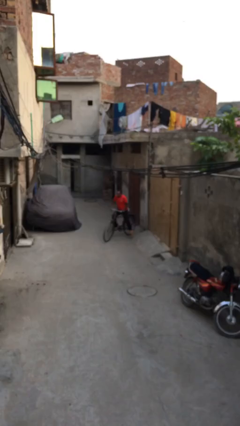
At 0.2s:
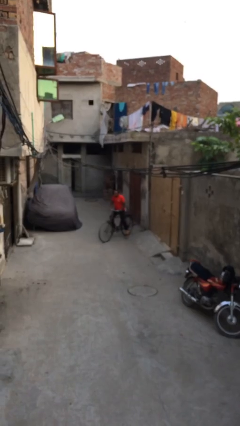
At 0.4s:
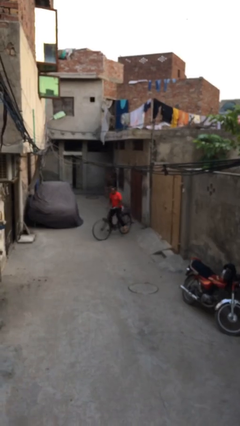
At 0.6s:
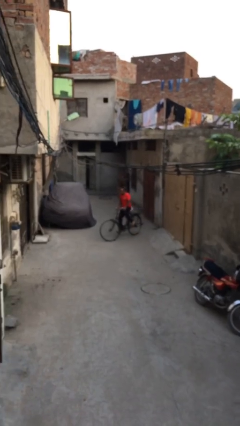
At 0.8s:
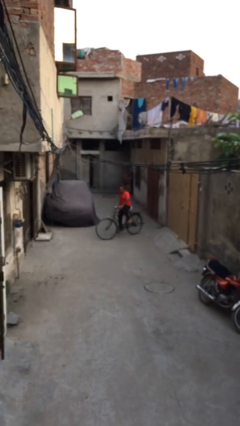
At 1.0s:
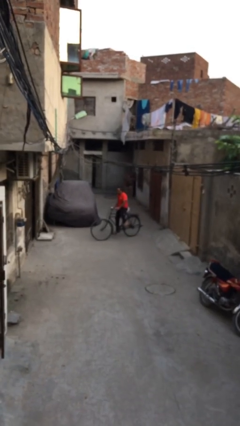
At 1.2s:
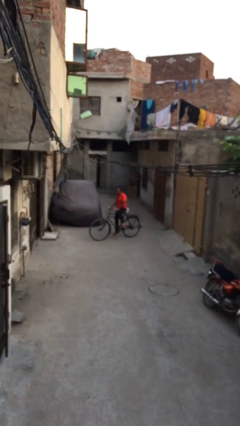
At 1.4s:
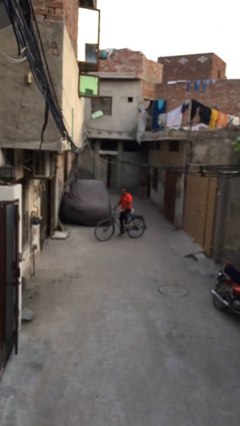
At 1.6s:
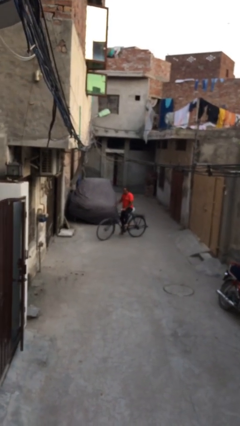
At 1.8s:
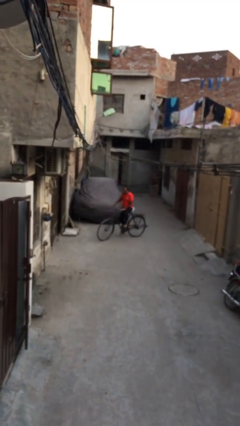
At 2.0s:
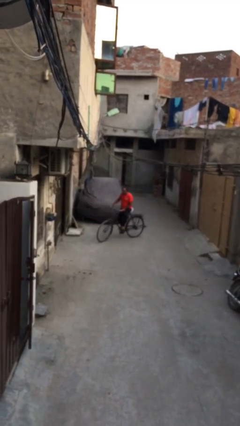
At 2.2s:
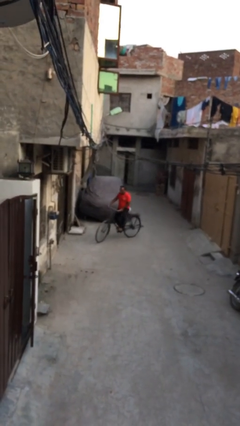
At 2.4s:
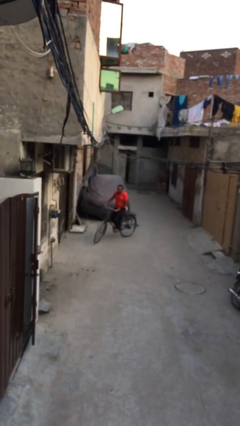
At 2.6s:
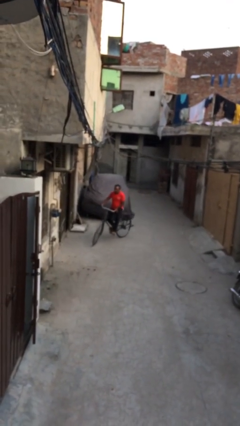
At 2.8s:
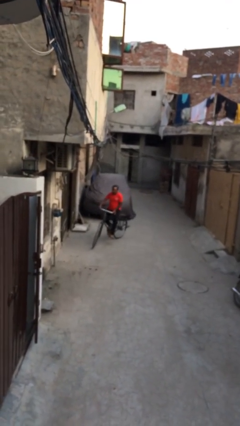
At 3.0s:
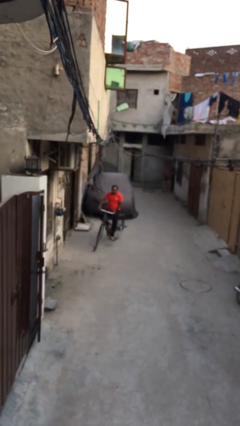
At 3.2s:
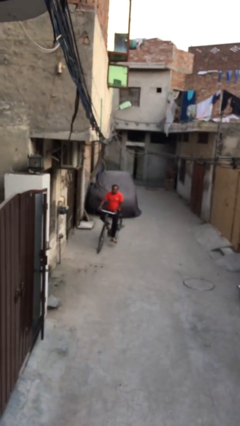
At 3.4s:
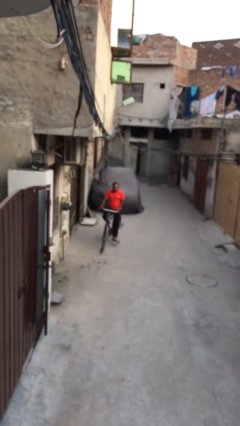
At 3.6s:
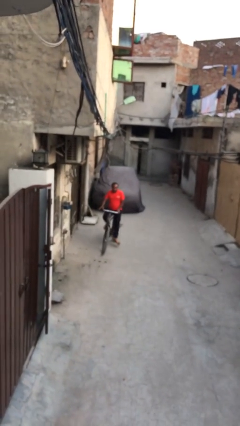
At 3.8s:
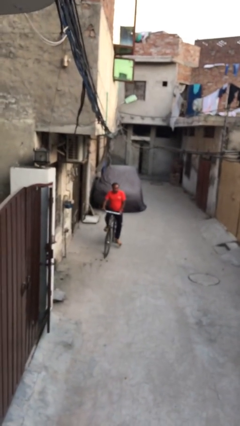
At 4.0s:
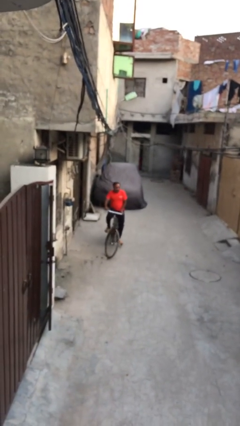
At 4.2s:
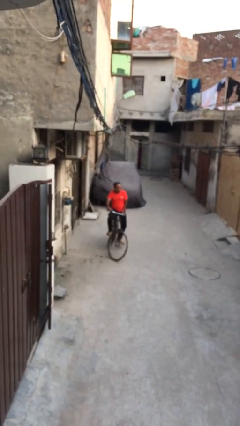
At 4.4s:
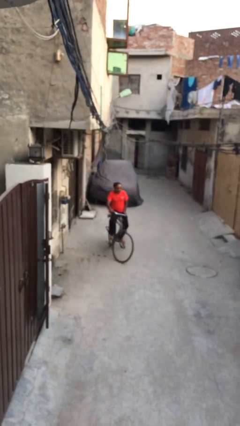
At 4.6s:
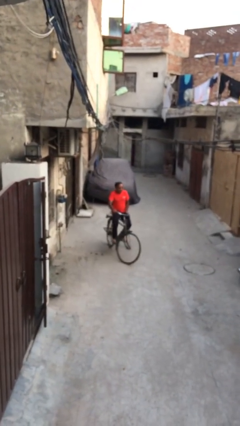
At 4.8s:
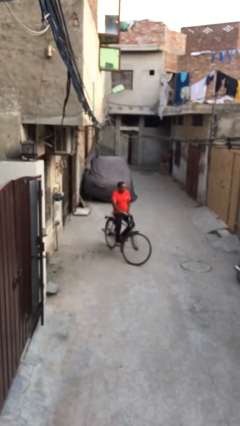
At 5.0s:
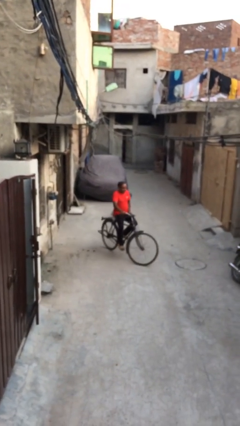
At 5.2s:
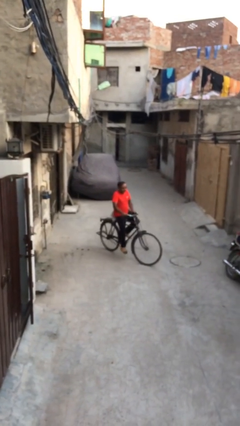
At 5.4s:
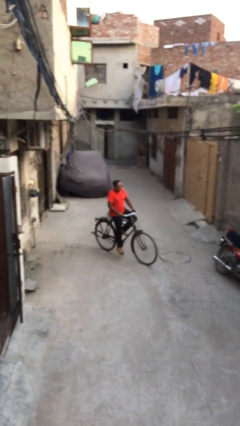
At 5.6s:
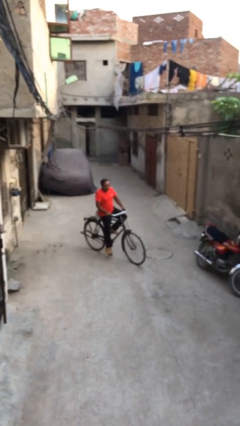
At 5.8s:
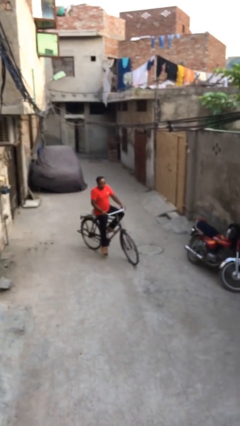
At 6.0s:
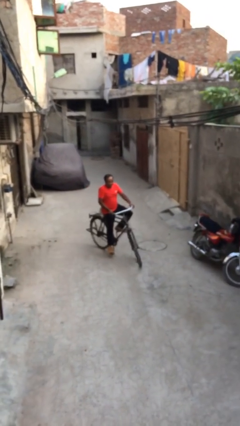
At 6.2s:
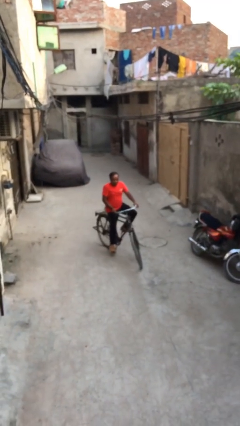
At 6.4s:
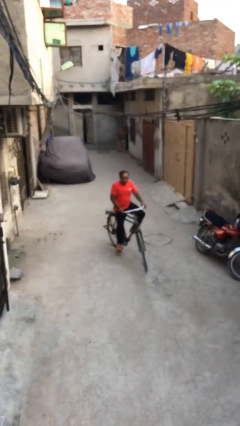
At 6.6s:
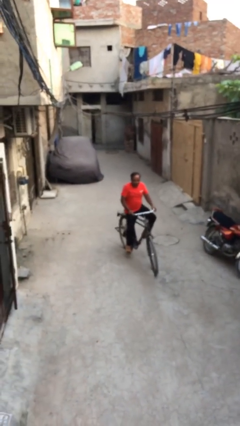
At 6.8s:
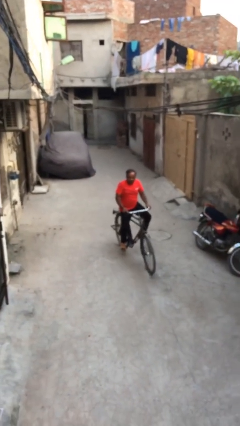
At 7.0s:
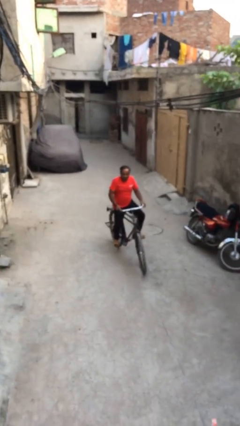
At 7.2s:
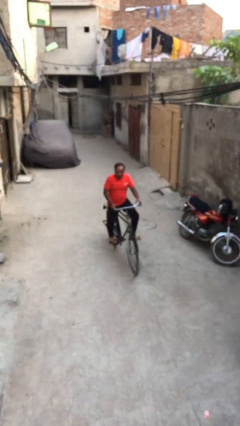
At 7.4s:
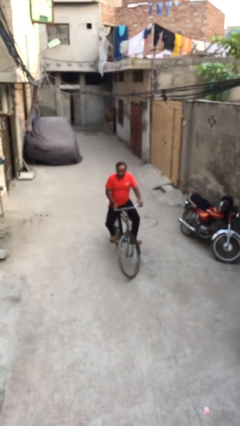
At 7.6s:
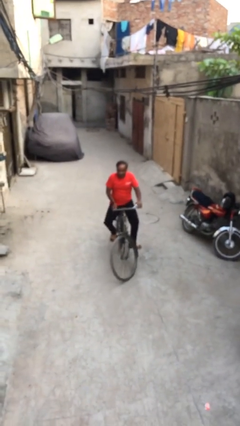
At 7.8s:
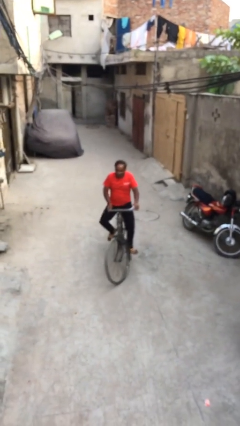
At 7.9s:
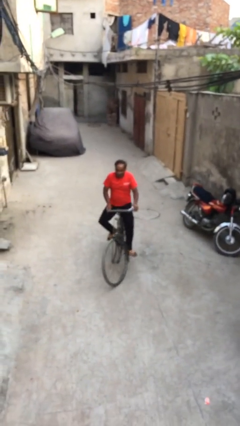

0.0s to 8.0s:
person rides bicycle

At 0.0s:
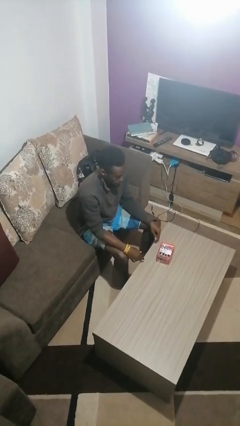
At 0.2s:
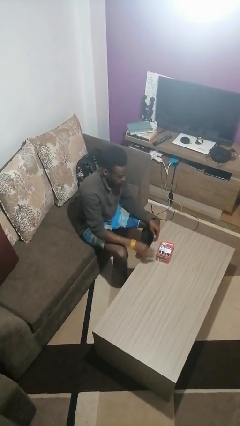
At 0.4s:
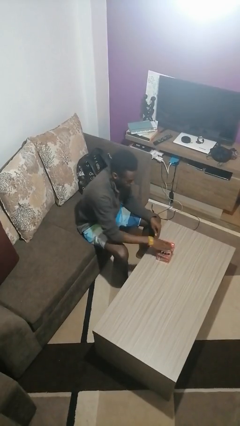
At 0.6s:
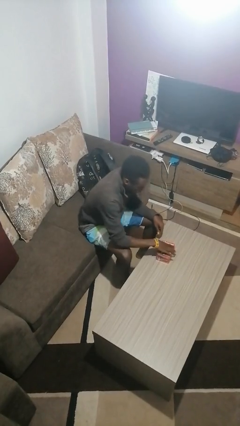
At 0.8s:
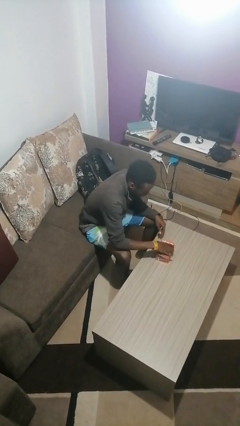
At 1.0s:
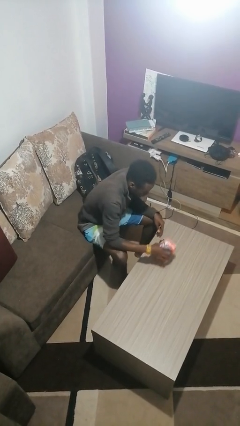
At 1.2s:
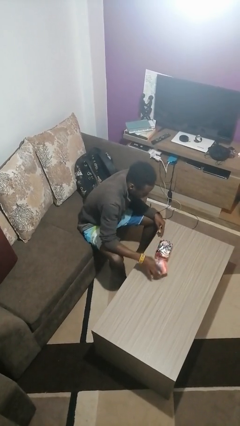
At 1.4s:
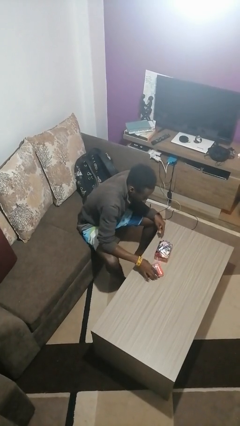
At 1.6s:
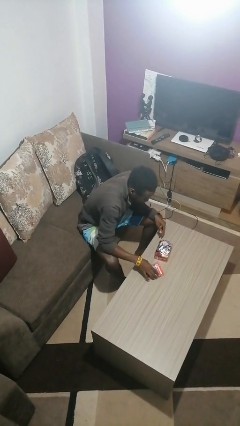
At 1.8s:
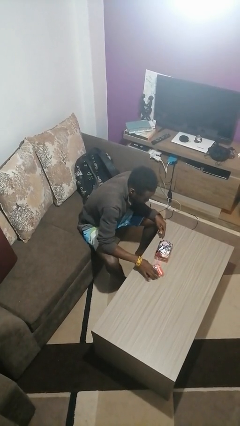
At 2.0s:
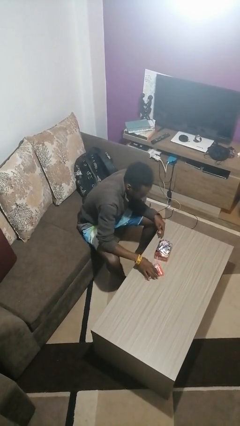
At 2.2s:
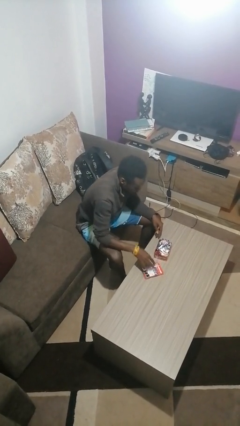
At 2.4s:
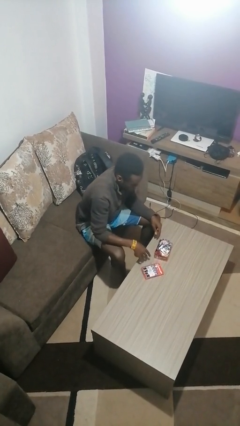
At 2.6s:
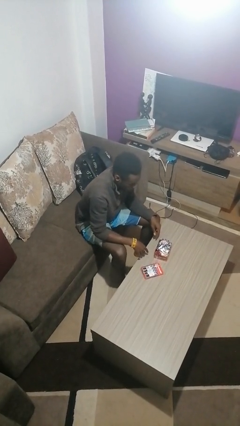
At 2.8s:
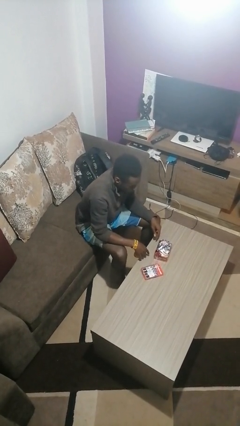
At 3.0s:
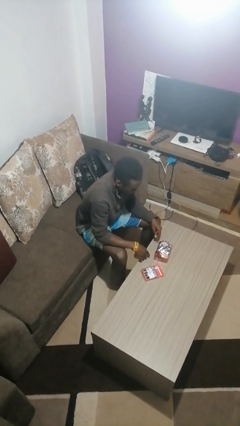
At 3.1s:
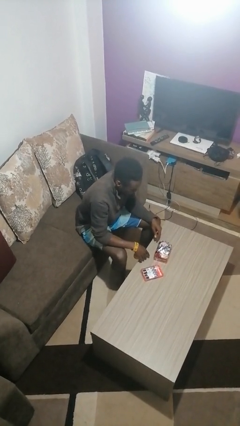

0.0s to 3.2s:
person opens jewelry box

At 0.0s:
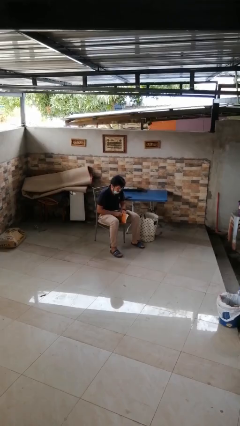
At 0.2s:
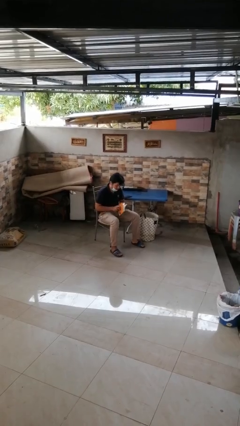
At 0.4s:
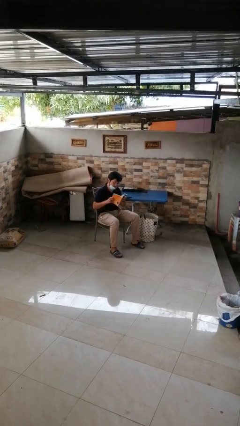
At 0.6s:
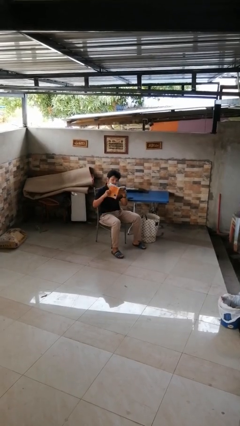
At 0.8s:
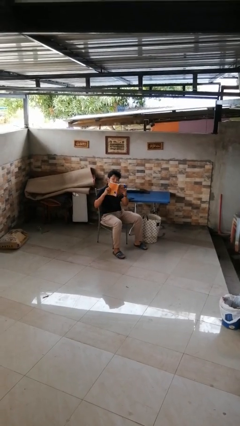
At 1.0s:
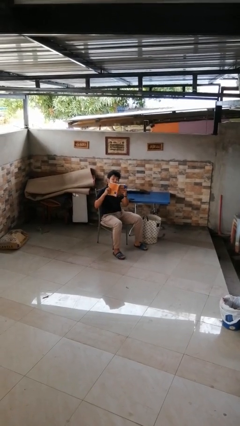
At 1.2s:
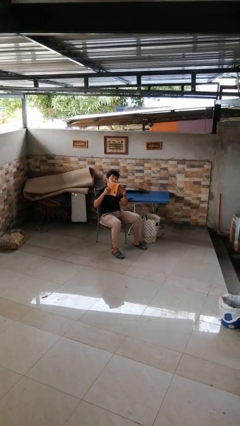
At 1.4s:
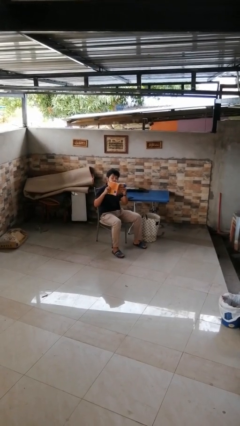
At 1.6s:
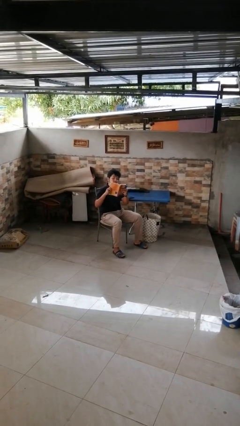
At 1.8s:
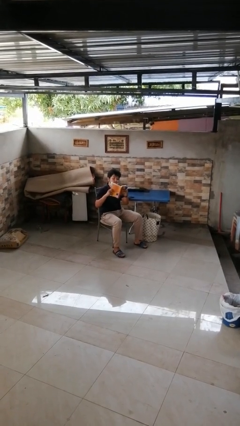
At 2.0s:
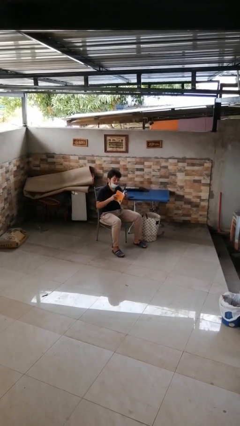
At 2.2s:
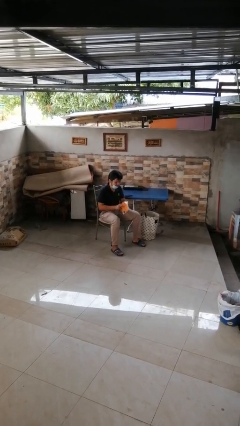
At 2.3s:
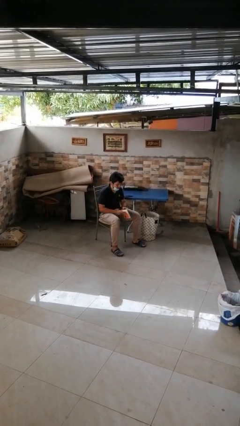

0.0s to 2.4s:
person reads book

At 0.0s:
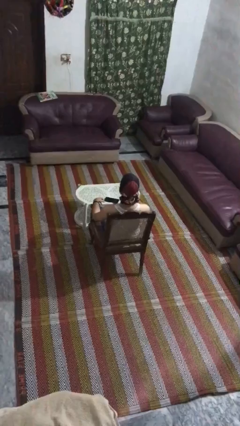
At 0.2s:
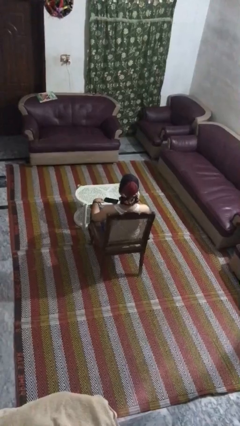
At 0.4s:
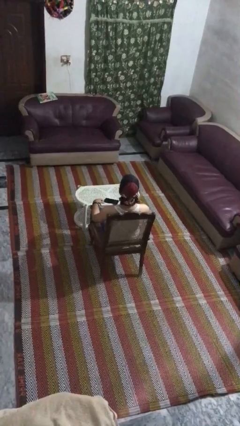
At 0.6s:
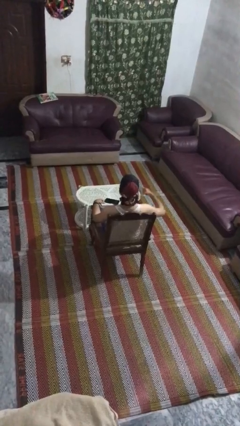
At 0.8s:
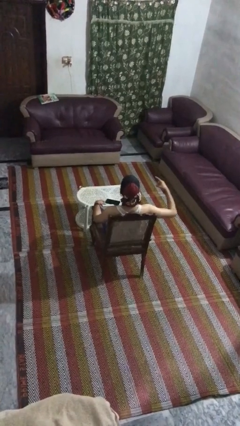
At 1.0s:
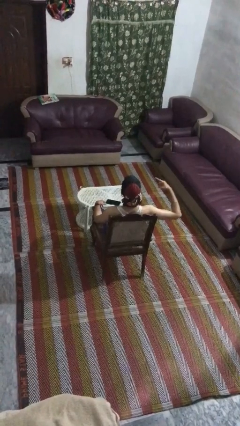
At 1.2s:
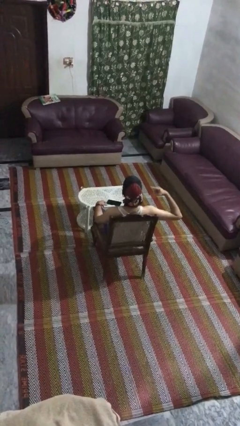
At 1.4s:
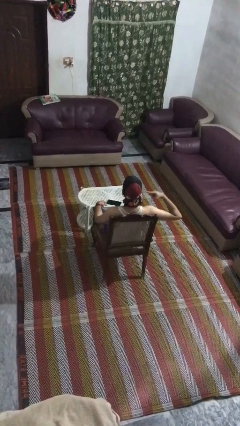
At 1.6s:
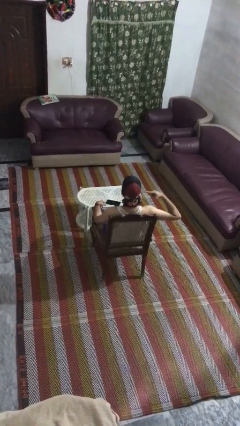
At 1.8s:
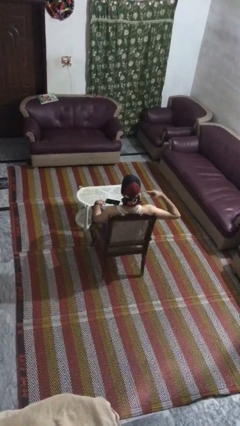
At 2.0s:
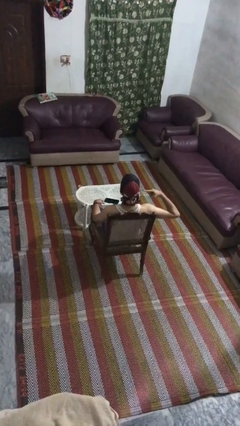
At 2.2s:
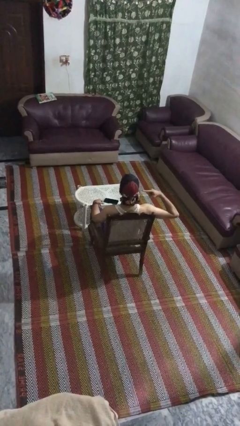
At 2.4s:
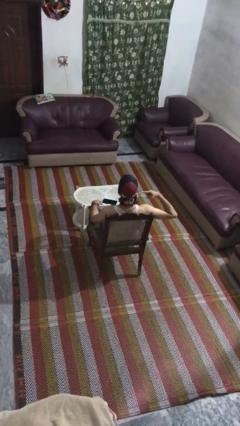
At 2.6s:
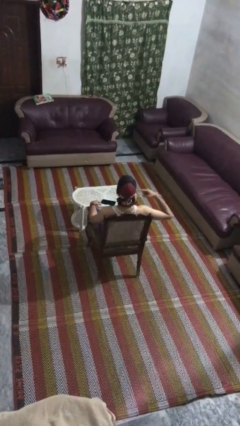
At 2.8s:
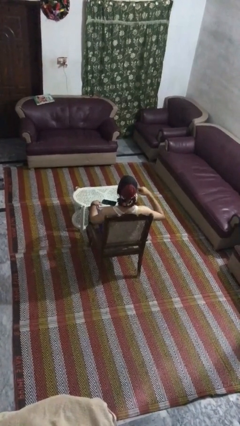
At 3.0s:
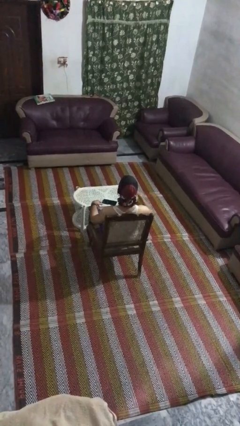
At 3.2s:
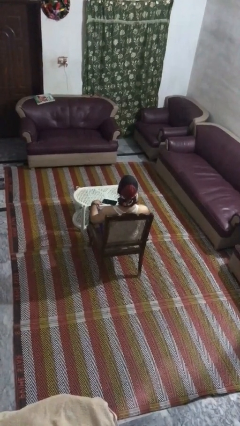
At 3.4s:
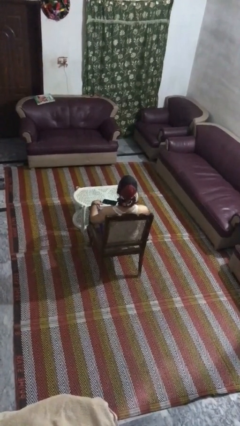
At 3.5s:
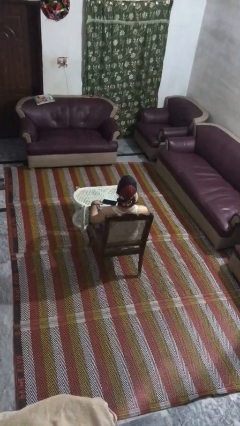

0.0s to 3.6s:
person gestures listen closely

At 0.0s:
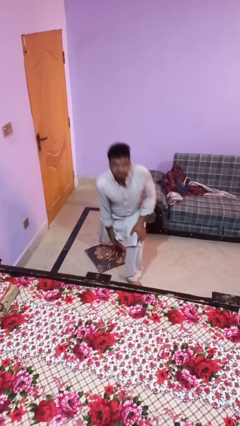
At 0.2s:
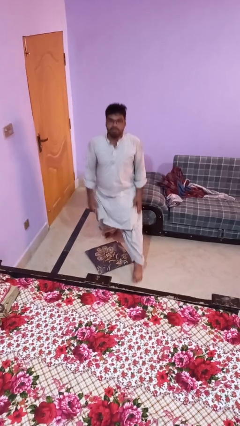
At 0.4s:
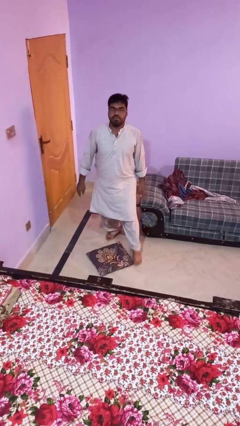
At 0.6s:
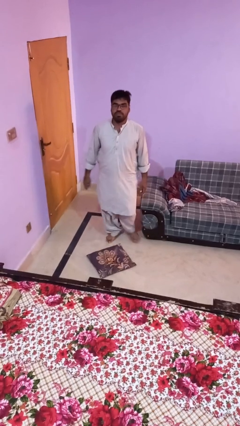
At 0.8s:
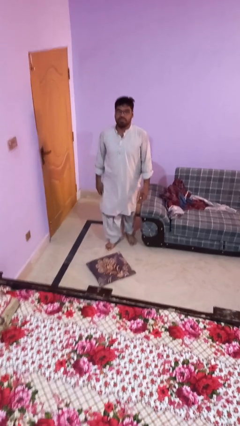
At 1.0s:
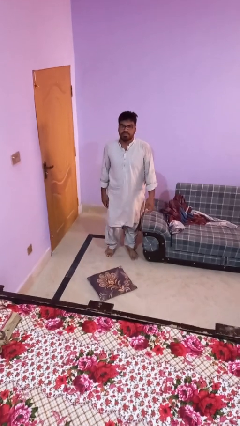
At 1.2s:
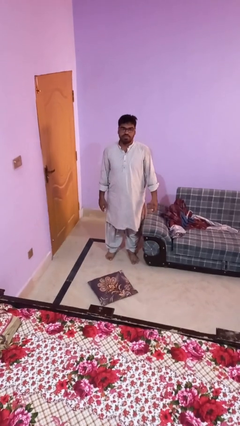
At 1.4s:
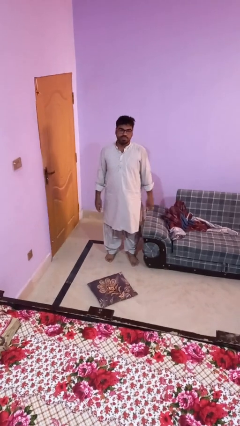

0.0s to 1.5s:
person stands up from floor
